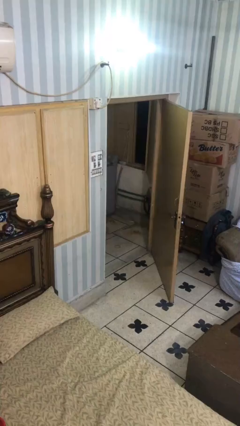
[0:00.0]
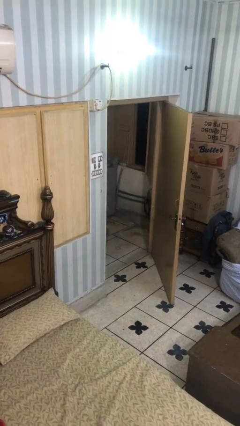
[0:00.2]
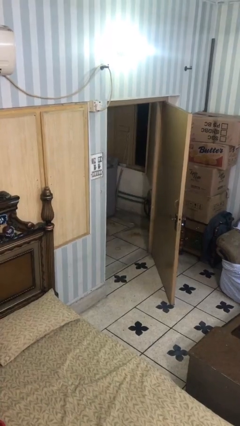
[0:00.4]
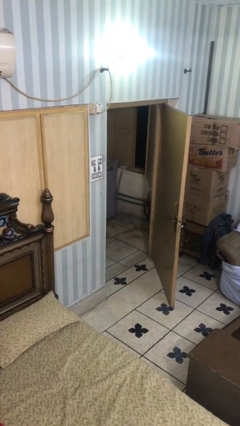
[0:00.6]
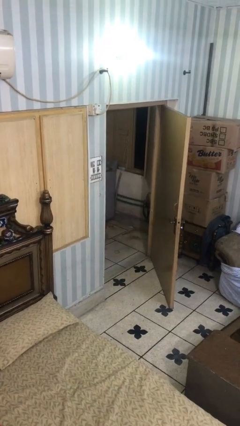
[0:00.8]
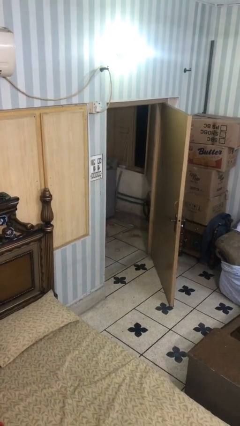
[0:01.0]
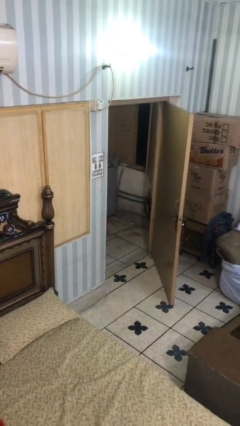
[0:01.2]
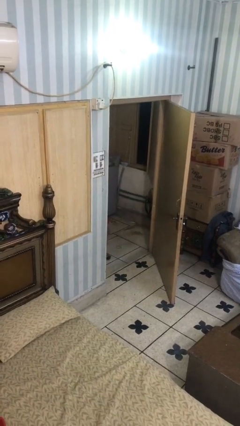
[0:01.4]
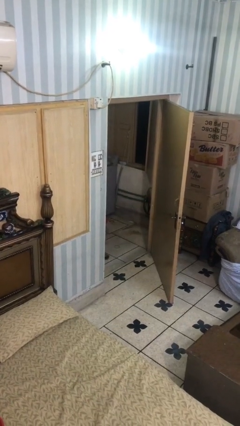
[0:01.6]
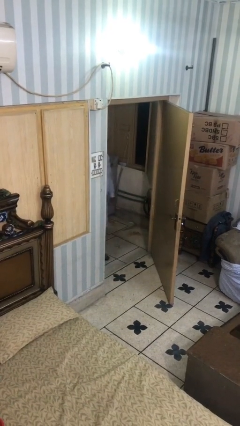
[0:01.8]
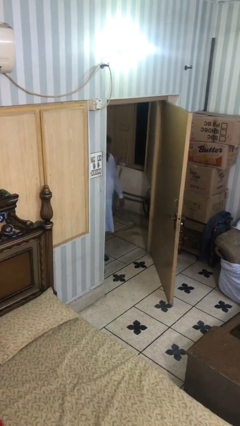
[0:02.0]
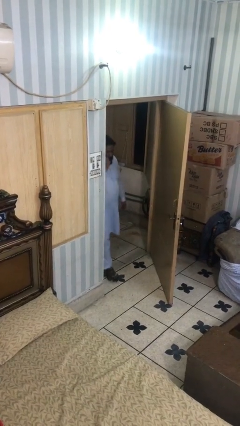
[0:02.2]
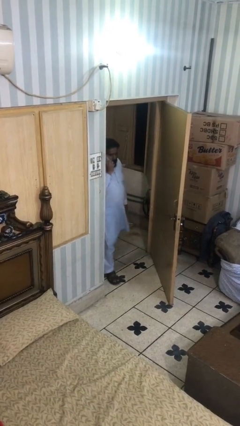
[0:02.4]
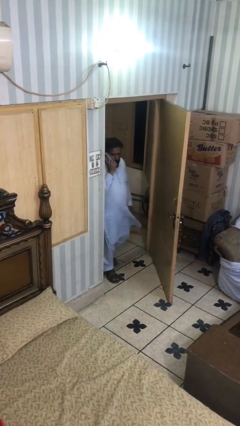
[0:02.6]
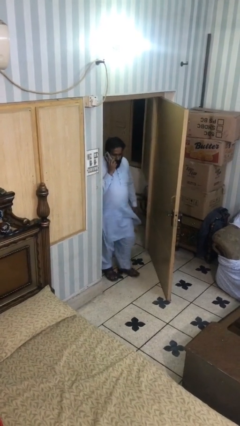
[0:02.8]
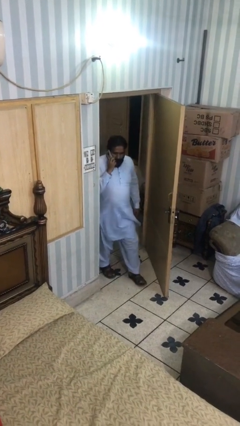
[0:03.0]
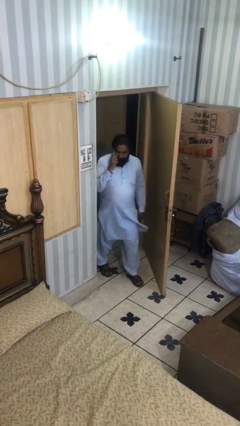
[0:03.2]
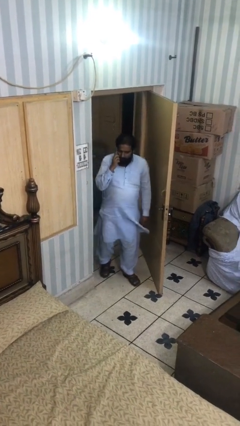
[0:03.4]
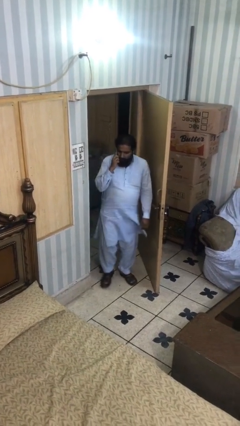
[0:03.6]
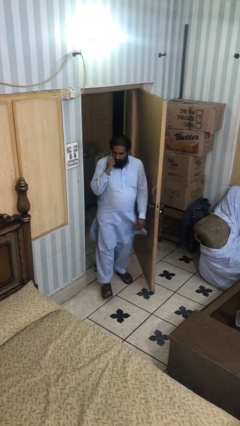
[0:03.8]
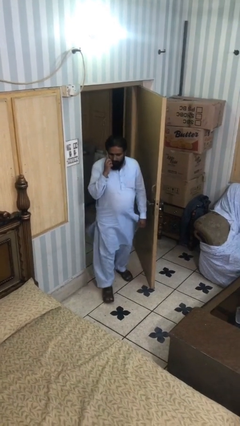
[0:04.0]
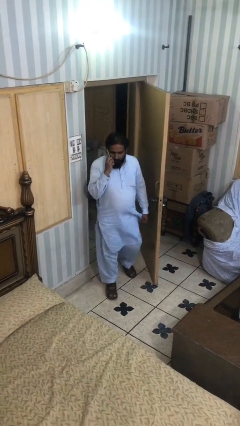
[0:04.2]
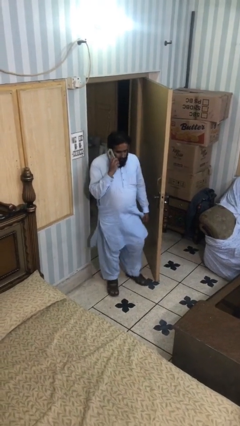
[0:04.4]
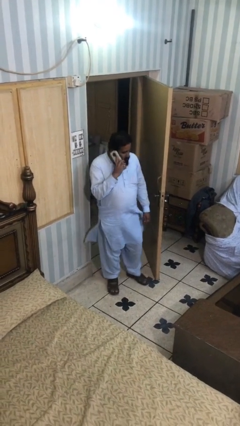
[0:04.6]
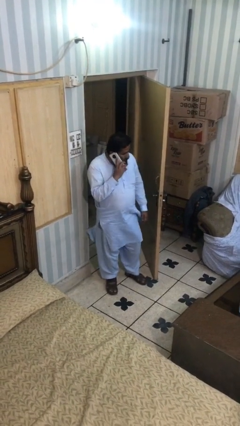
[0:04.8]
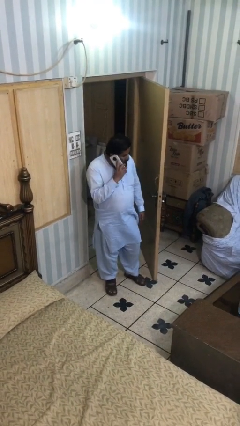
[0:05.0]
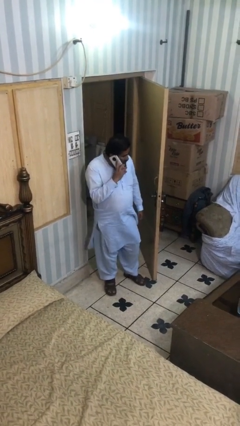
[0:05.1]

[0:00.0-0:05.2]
person enters scene through structure

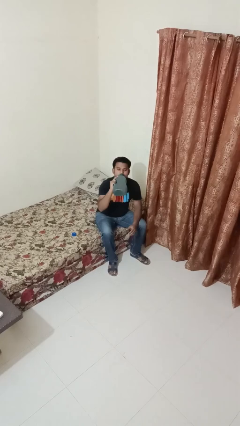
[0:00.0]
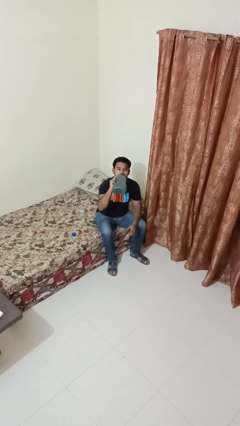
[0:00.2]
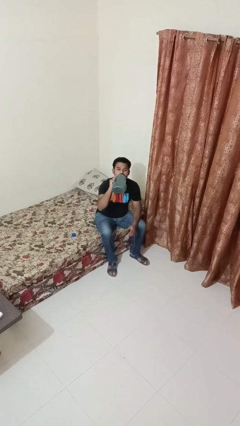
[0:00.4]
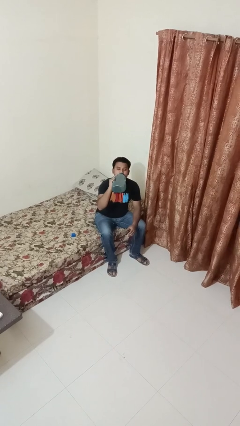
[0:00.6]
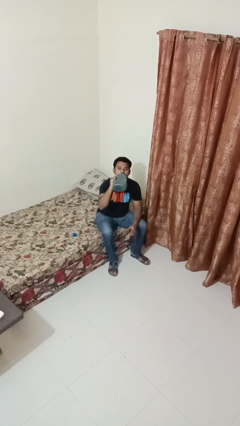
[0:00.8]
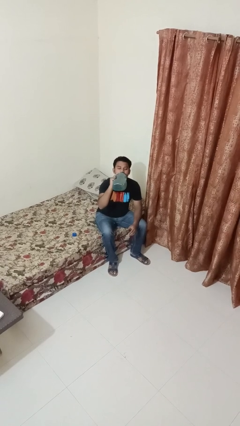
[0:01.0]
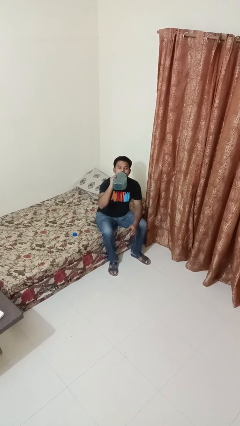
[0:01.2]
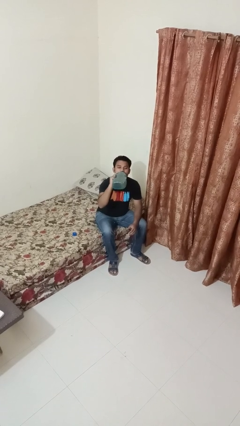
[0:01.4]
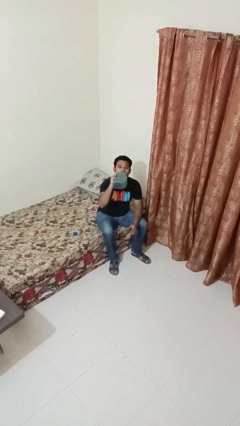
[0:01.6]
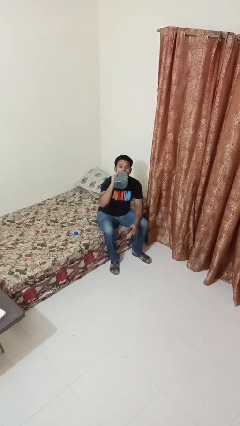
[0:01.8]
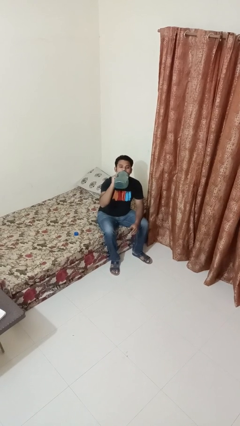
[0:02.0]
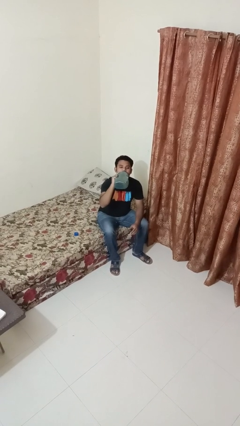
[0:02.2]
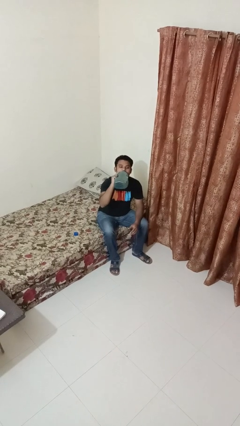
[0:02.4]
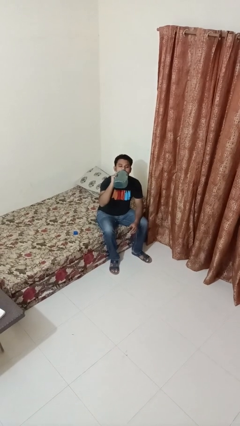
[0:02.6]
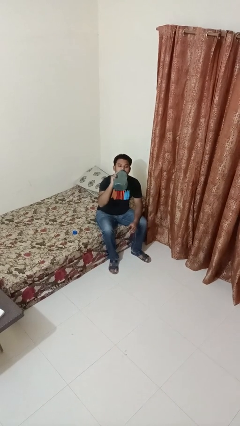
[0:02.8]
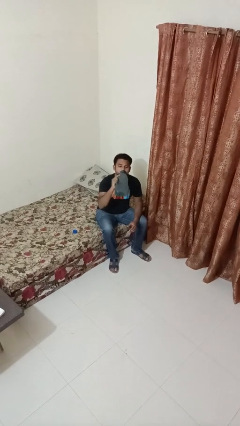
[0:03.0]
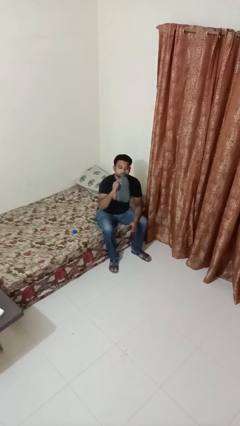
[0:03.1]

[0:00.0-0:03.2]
person drinks from bottle

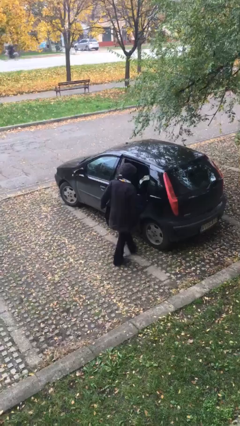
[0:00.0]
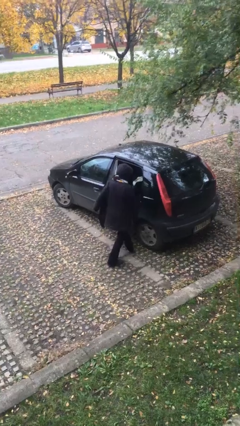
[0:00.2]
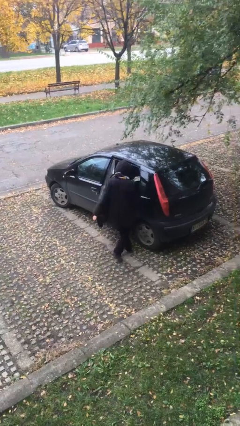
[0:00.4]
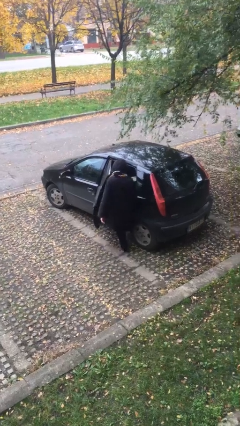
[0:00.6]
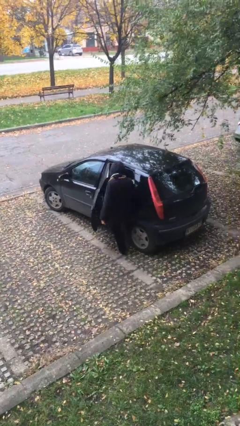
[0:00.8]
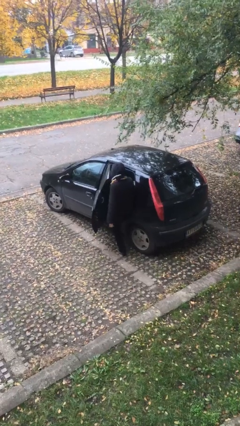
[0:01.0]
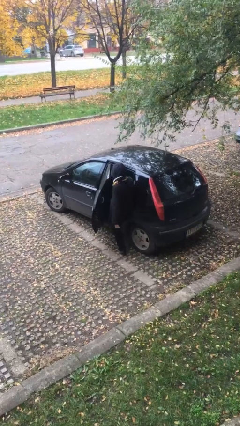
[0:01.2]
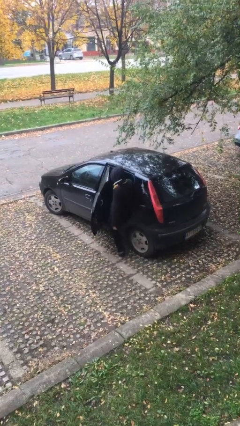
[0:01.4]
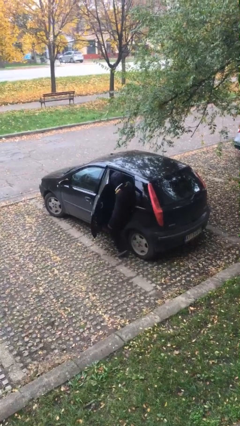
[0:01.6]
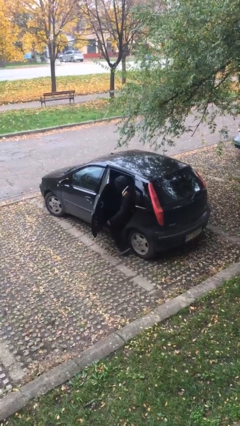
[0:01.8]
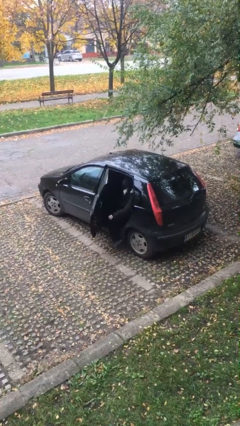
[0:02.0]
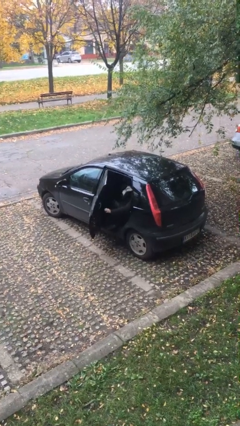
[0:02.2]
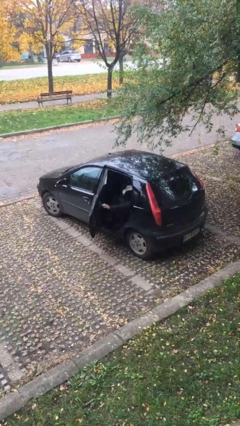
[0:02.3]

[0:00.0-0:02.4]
person enters car

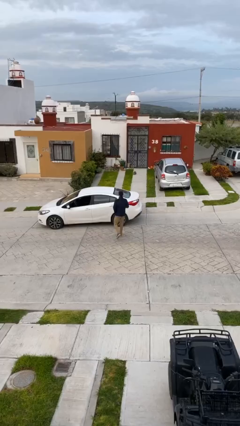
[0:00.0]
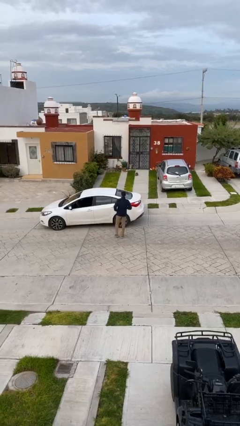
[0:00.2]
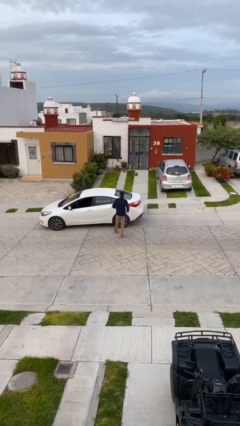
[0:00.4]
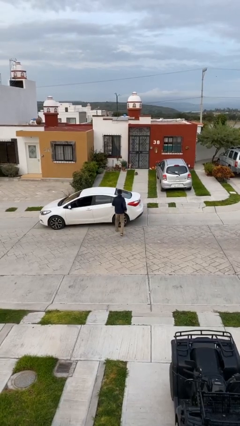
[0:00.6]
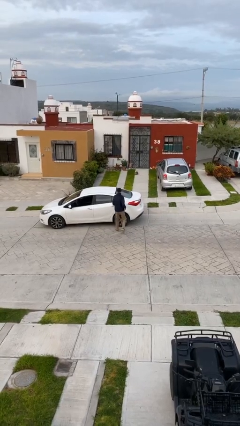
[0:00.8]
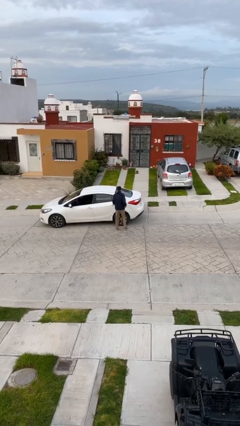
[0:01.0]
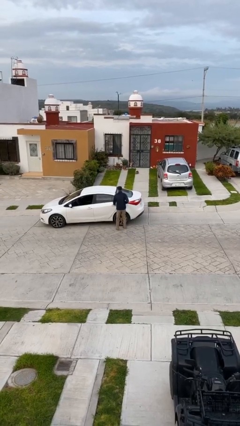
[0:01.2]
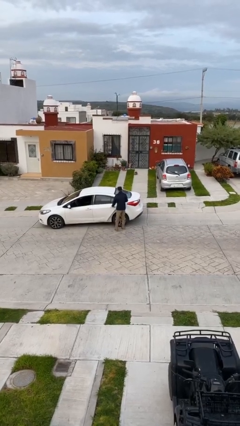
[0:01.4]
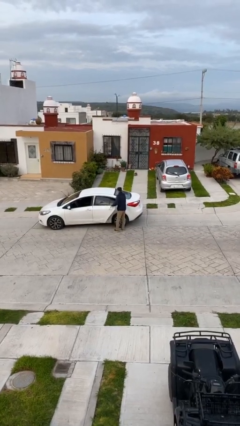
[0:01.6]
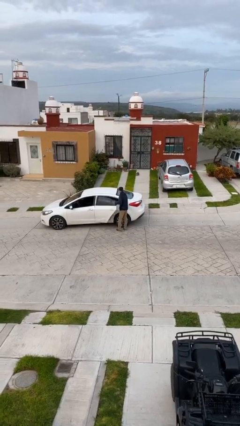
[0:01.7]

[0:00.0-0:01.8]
person opens car door

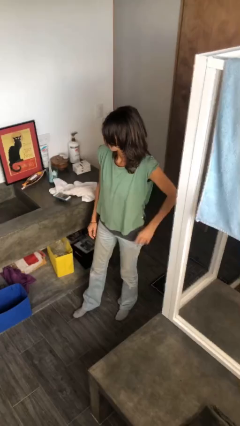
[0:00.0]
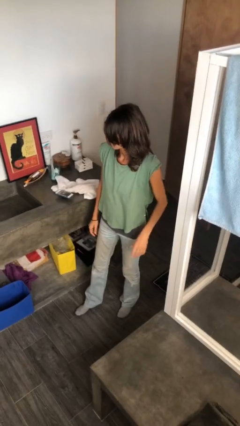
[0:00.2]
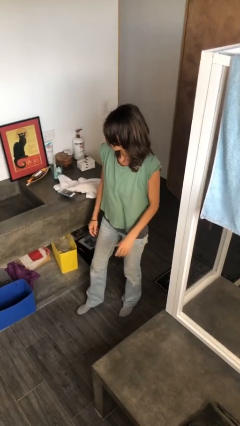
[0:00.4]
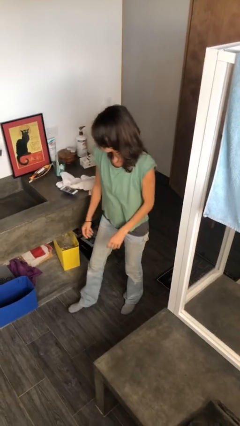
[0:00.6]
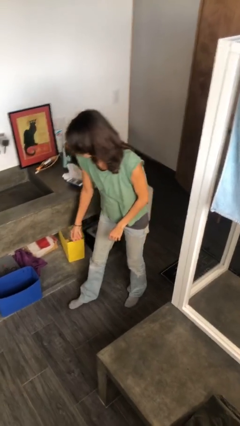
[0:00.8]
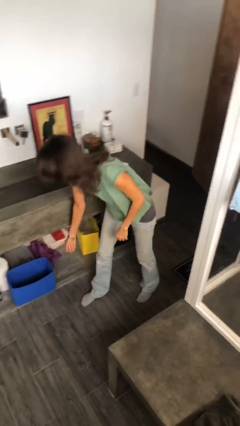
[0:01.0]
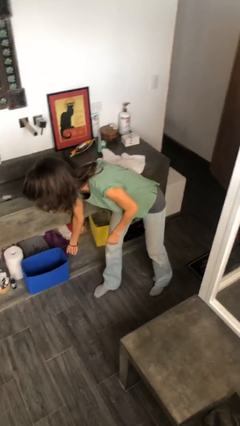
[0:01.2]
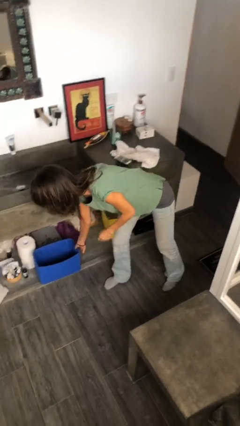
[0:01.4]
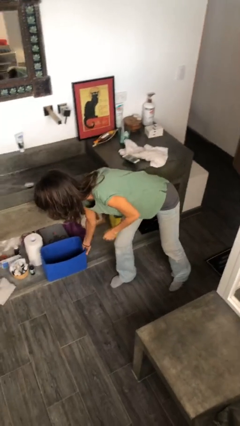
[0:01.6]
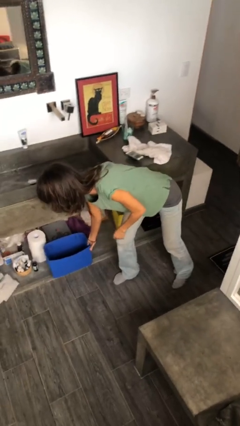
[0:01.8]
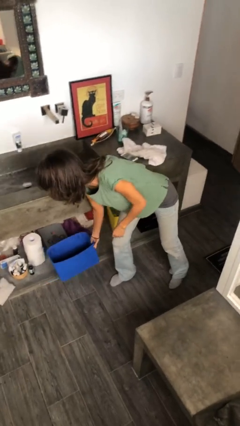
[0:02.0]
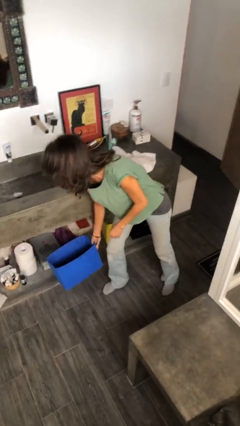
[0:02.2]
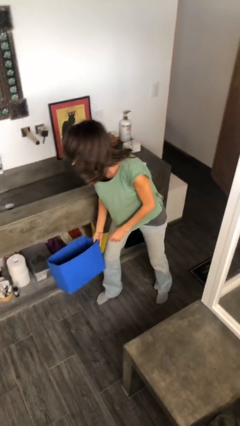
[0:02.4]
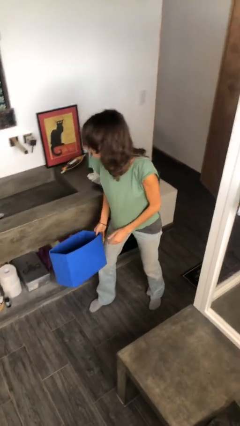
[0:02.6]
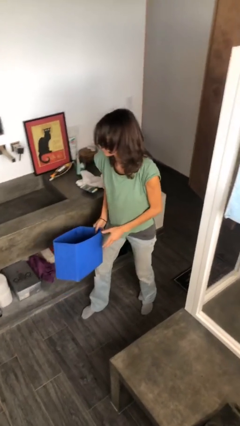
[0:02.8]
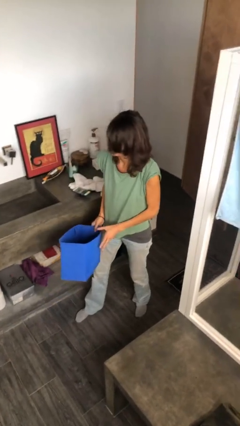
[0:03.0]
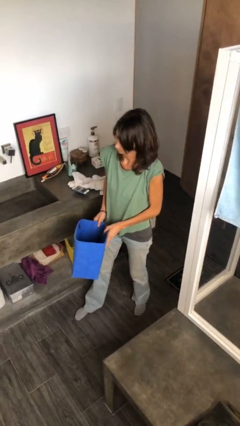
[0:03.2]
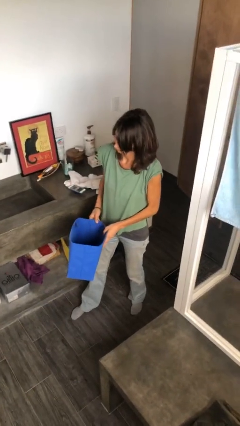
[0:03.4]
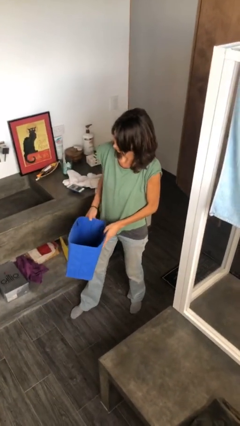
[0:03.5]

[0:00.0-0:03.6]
person picks up object from cabinet

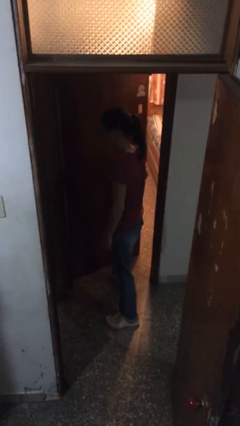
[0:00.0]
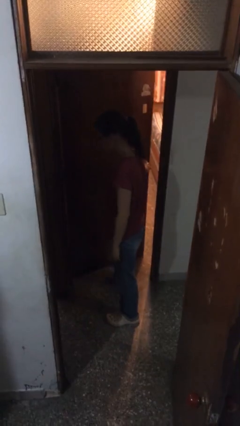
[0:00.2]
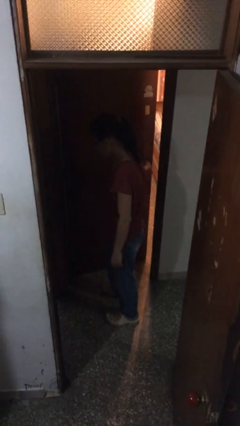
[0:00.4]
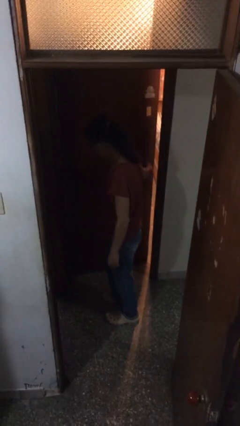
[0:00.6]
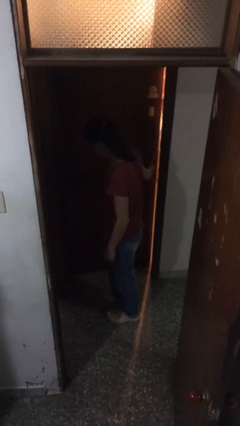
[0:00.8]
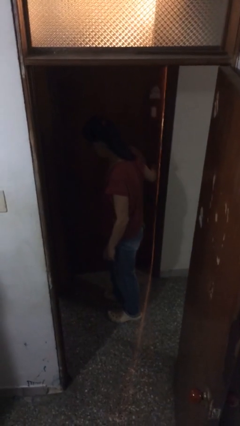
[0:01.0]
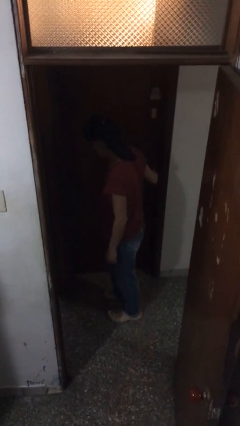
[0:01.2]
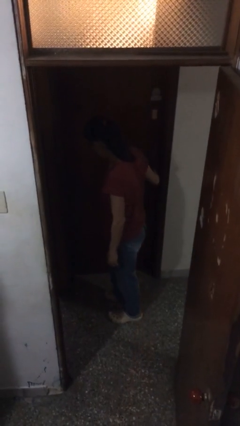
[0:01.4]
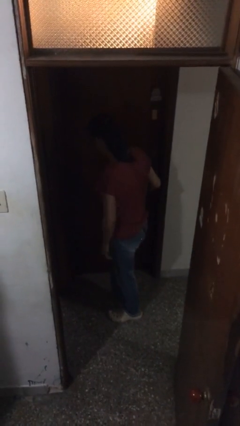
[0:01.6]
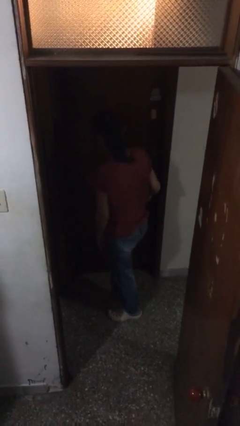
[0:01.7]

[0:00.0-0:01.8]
person closes facility door
